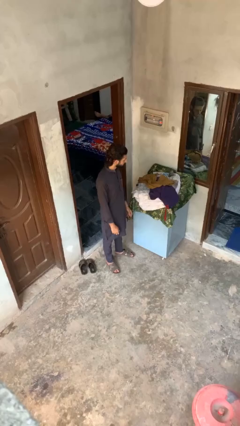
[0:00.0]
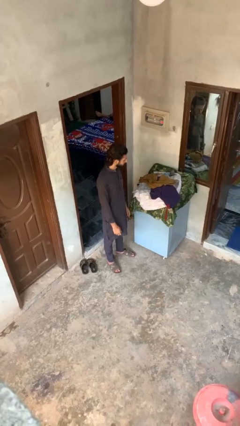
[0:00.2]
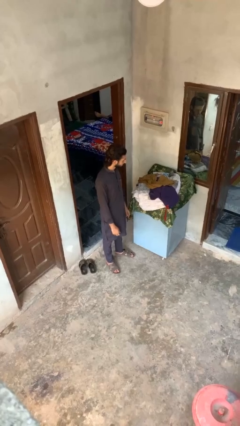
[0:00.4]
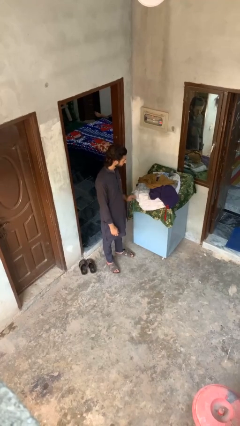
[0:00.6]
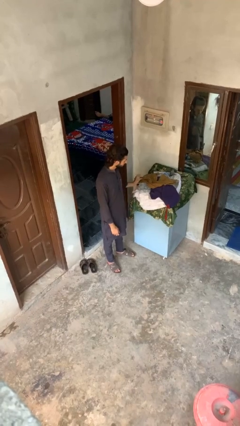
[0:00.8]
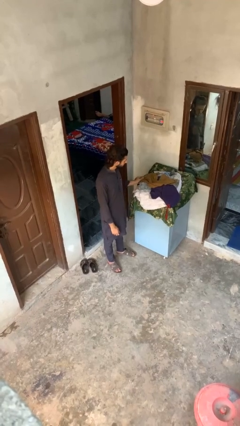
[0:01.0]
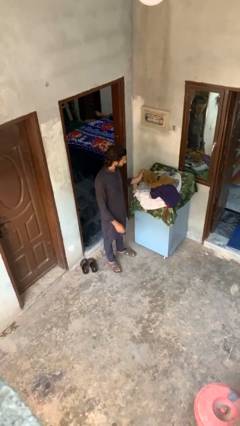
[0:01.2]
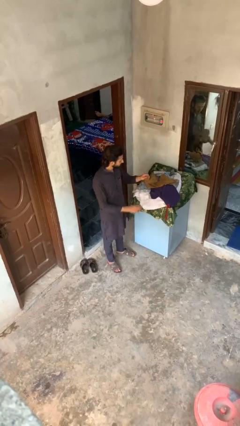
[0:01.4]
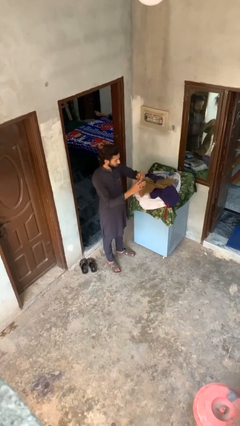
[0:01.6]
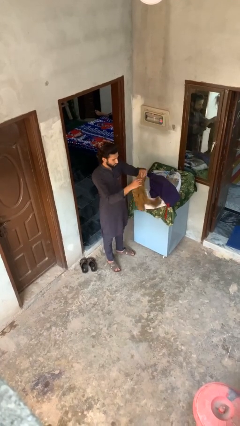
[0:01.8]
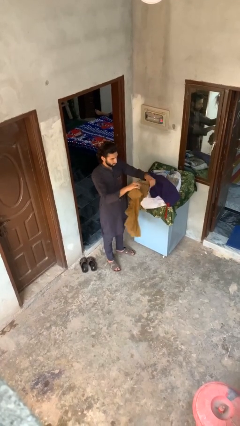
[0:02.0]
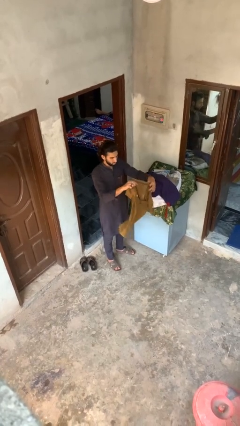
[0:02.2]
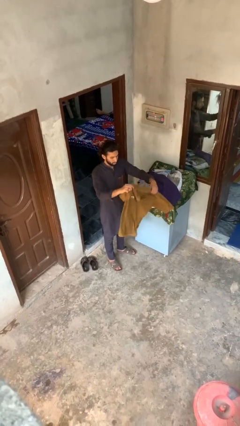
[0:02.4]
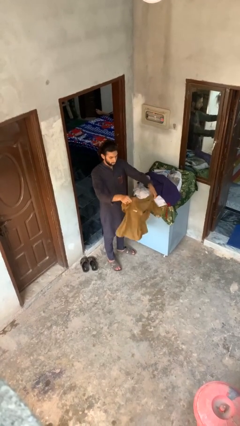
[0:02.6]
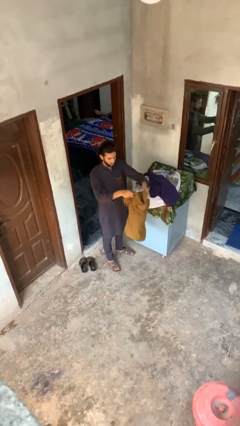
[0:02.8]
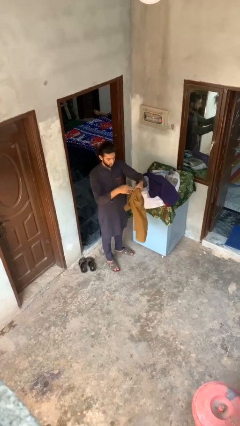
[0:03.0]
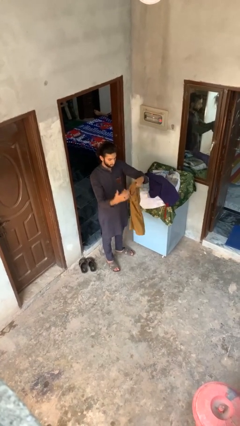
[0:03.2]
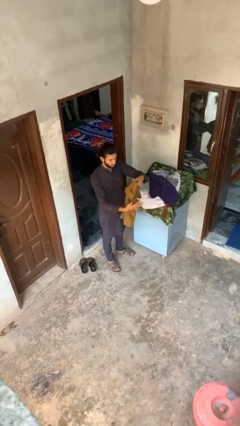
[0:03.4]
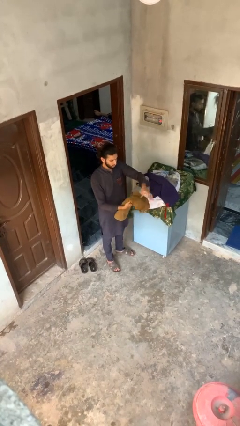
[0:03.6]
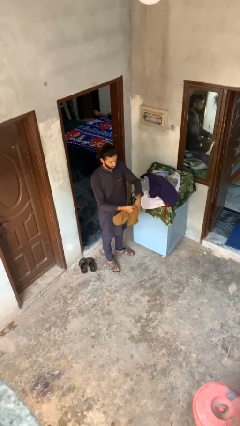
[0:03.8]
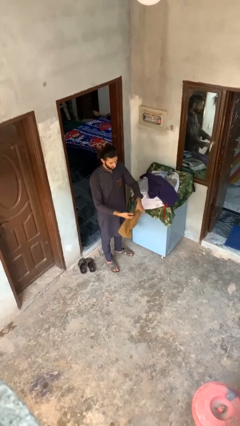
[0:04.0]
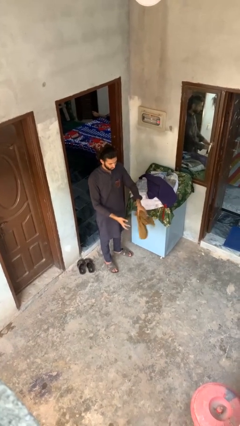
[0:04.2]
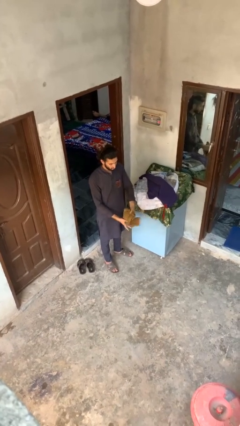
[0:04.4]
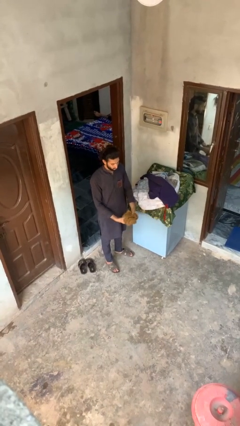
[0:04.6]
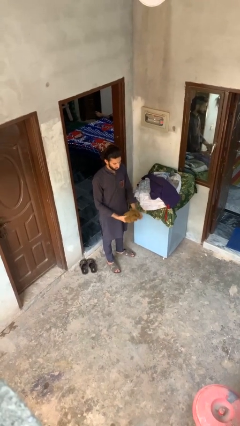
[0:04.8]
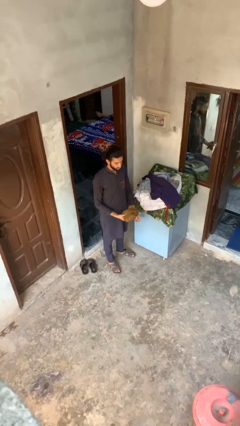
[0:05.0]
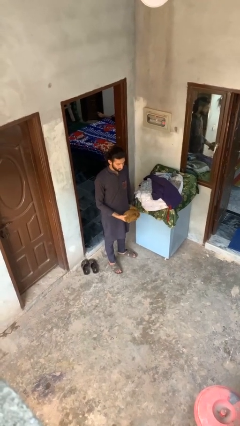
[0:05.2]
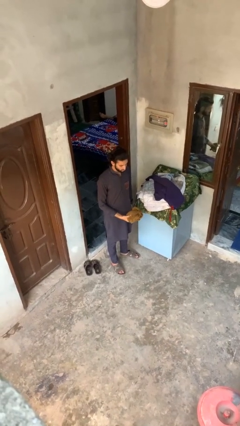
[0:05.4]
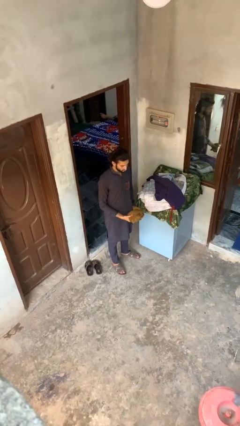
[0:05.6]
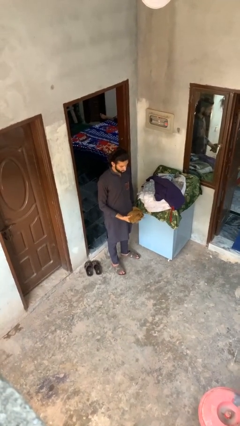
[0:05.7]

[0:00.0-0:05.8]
person folds shirt

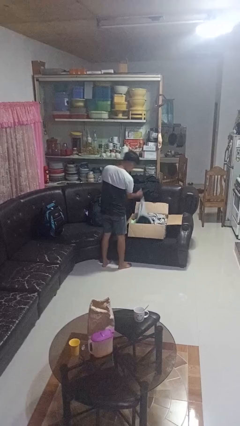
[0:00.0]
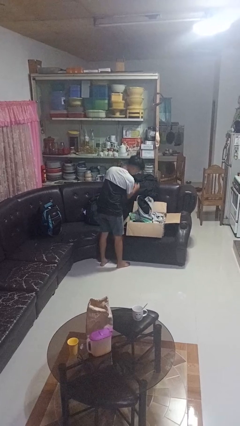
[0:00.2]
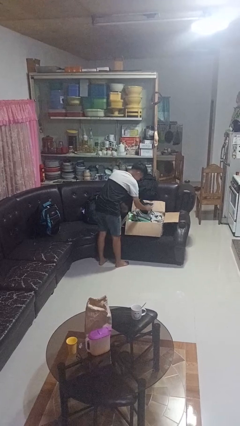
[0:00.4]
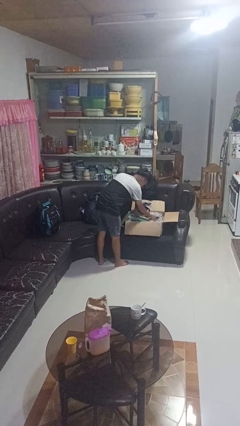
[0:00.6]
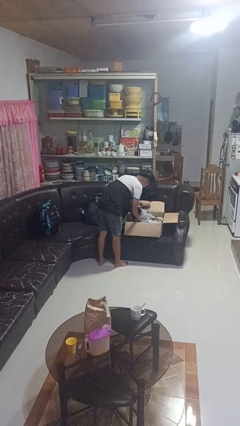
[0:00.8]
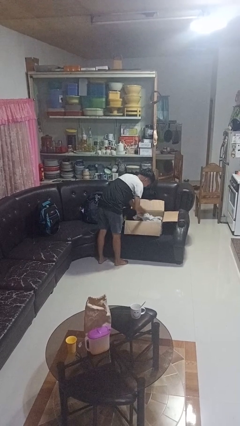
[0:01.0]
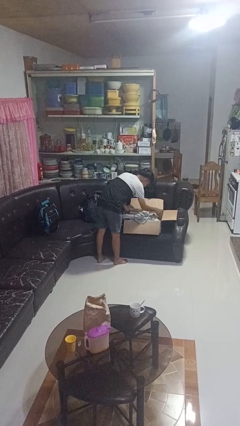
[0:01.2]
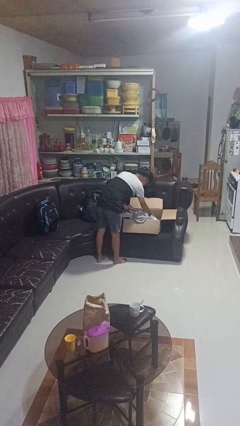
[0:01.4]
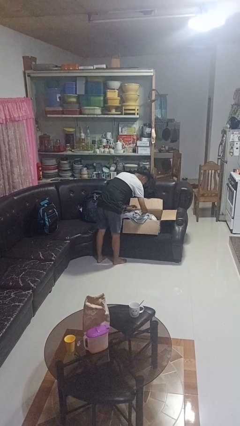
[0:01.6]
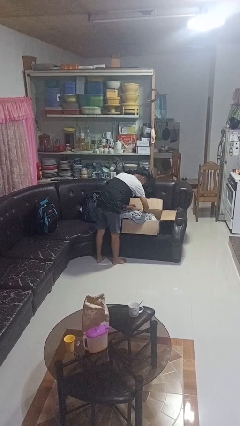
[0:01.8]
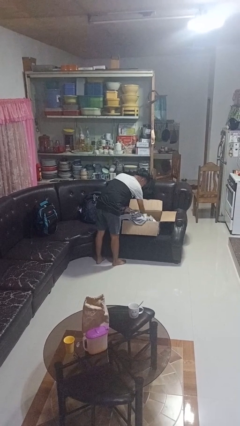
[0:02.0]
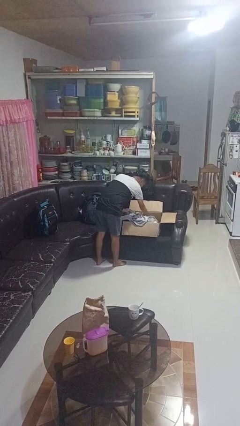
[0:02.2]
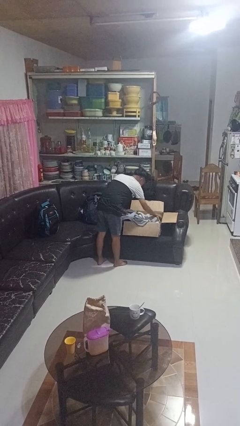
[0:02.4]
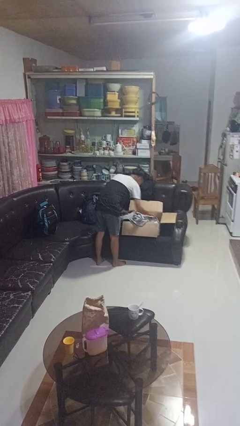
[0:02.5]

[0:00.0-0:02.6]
person searches in box

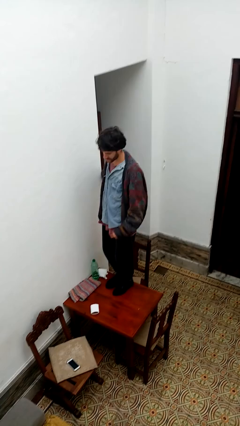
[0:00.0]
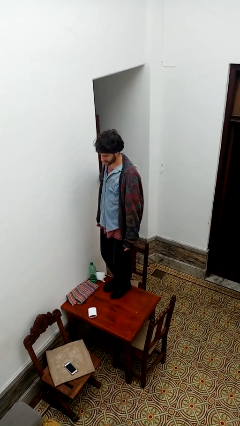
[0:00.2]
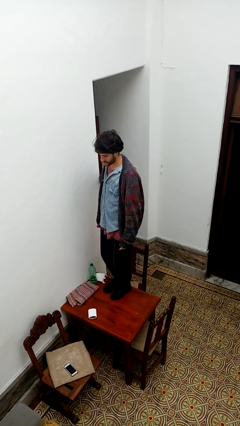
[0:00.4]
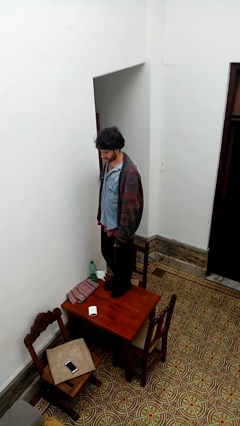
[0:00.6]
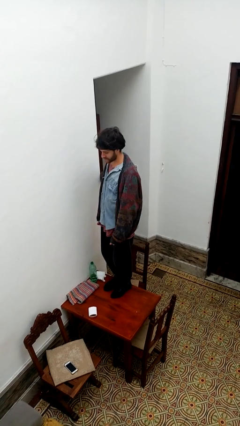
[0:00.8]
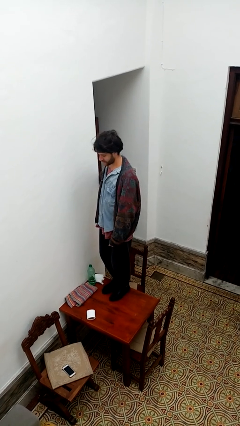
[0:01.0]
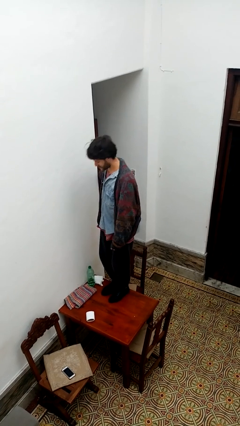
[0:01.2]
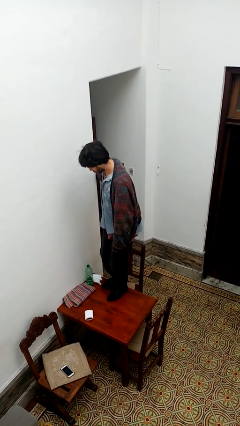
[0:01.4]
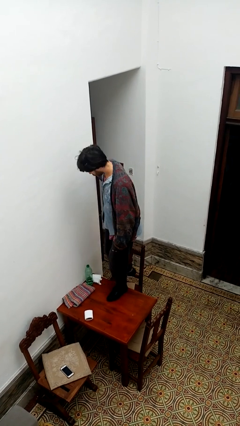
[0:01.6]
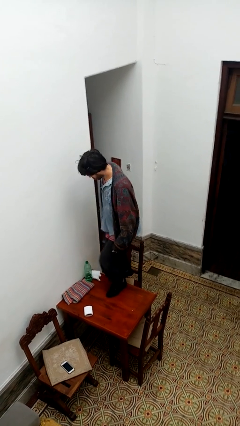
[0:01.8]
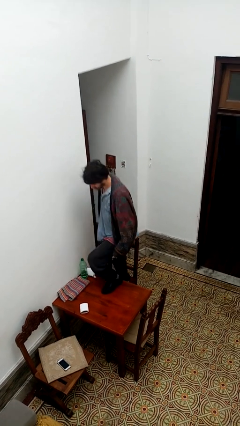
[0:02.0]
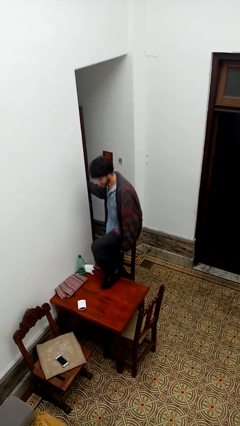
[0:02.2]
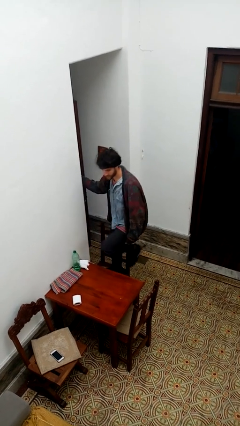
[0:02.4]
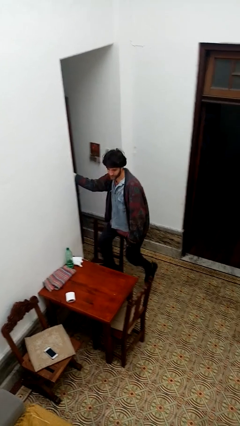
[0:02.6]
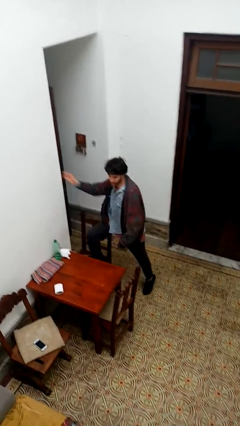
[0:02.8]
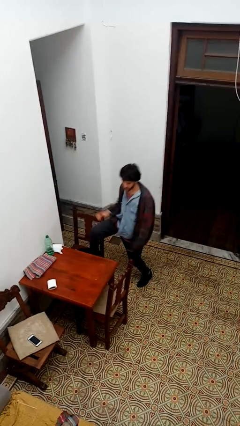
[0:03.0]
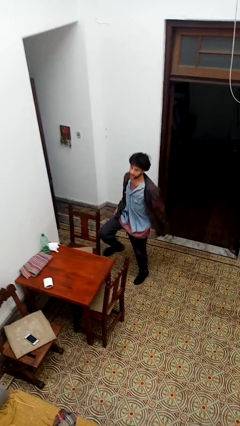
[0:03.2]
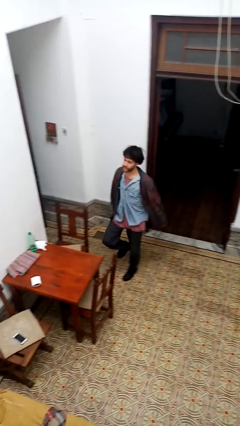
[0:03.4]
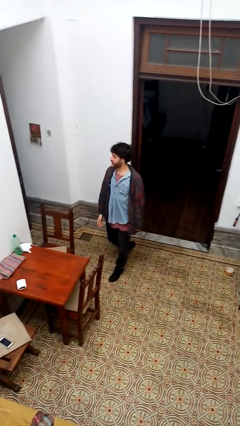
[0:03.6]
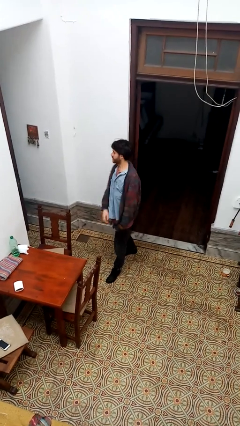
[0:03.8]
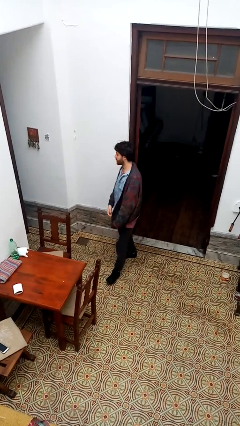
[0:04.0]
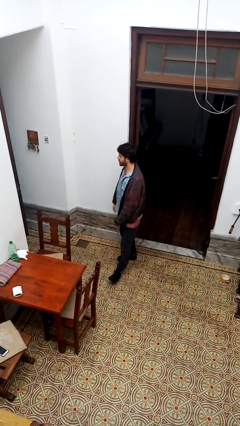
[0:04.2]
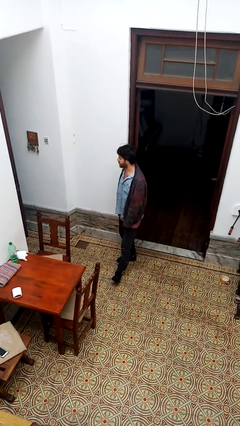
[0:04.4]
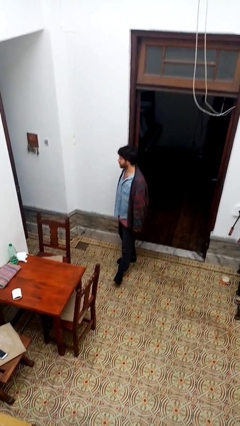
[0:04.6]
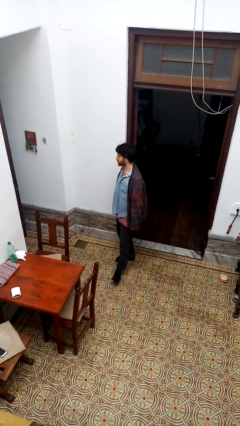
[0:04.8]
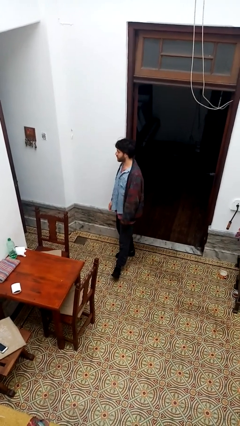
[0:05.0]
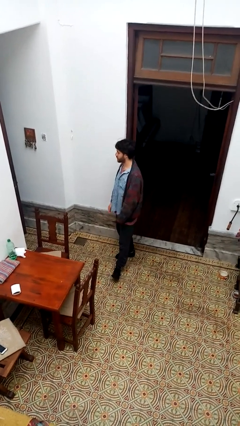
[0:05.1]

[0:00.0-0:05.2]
person climbs off table

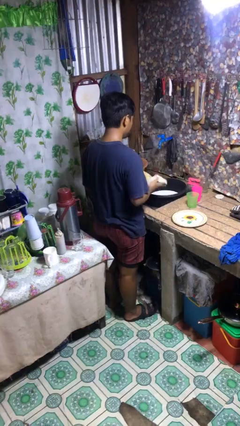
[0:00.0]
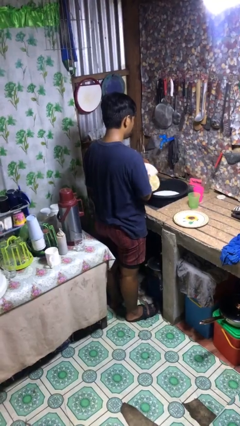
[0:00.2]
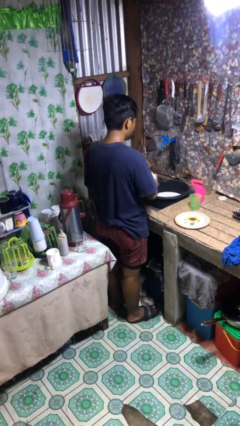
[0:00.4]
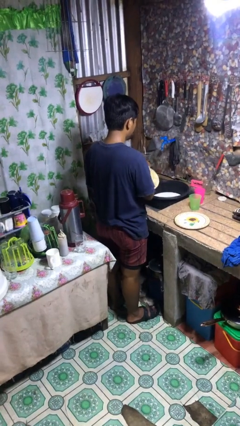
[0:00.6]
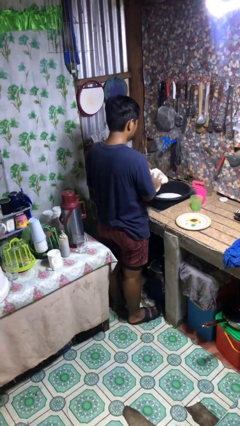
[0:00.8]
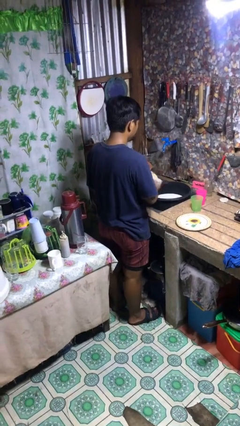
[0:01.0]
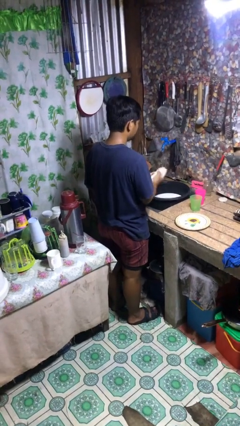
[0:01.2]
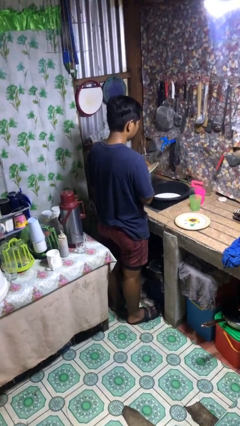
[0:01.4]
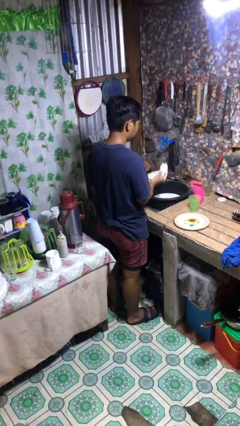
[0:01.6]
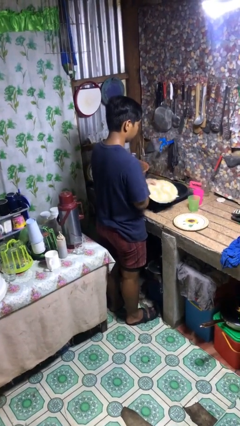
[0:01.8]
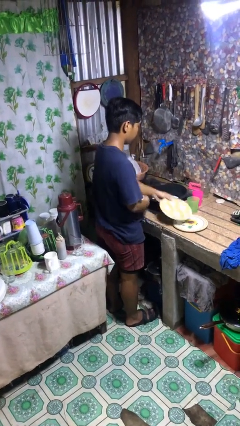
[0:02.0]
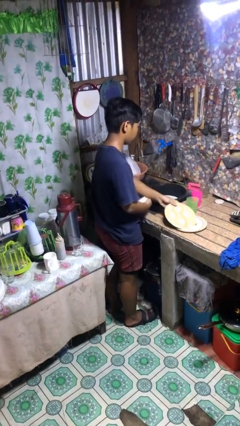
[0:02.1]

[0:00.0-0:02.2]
person dries dish

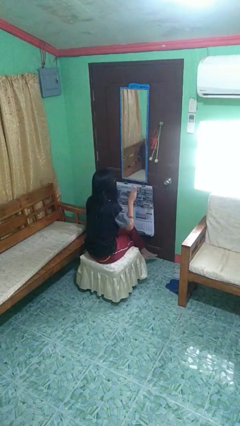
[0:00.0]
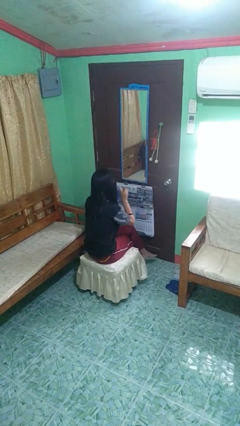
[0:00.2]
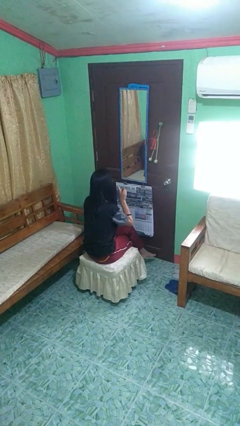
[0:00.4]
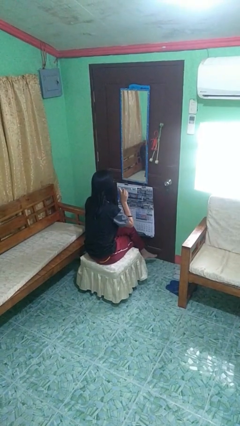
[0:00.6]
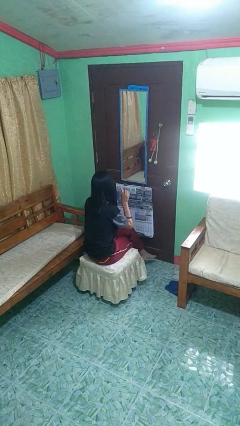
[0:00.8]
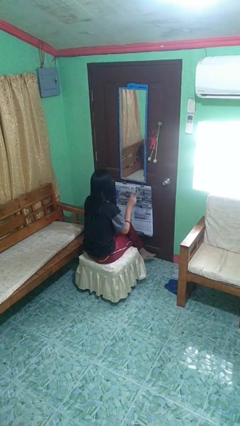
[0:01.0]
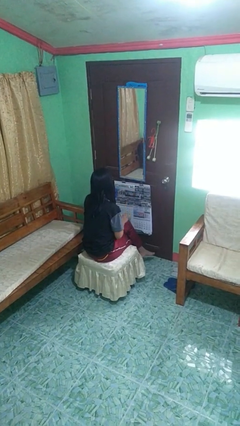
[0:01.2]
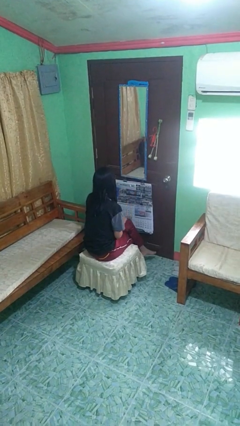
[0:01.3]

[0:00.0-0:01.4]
person gestures peace

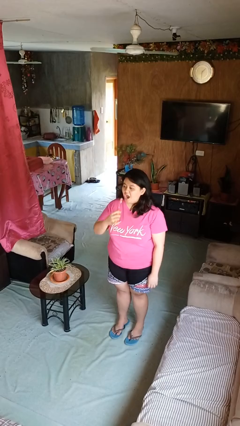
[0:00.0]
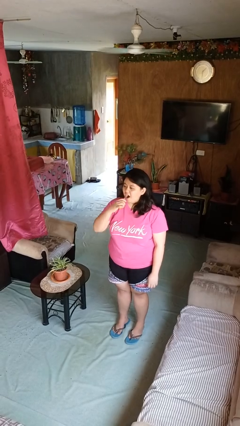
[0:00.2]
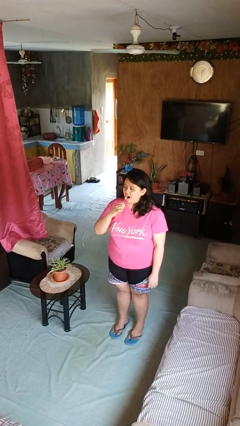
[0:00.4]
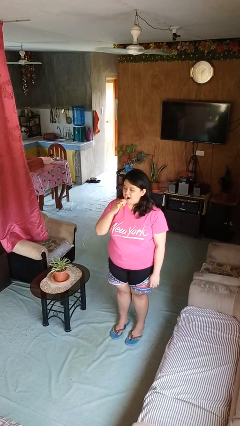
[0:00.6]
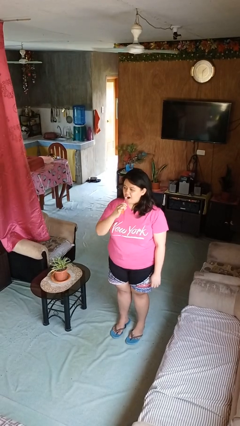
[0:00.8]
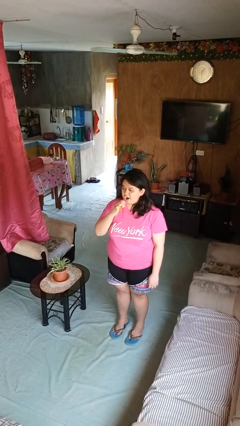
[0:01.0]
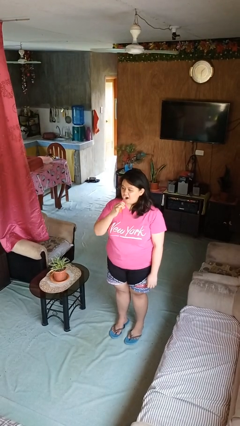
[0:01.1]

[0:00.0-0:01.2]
person brushes teeth
